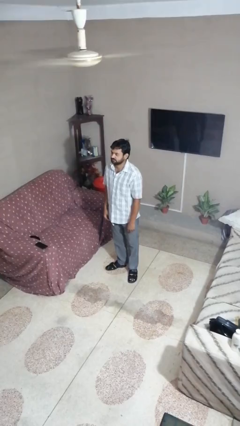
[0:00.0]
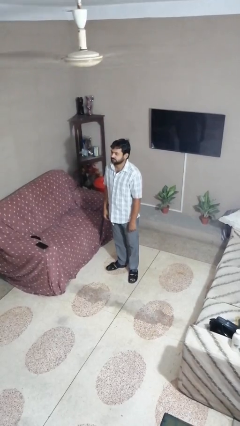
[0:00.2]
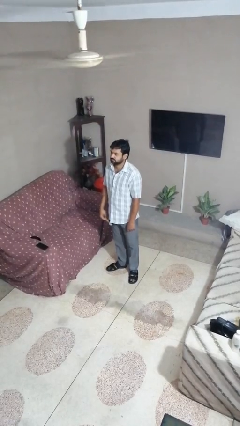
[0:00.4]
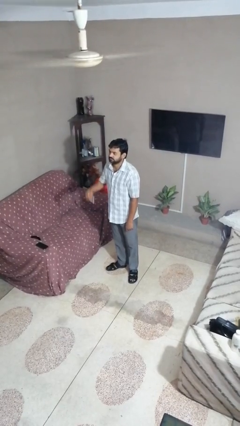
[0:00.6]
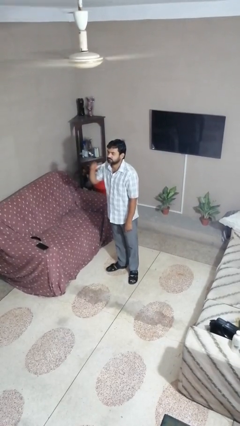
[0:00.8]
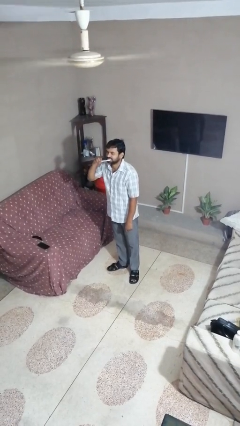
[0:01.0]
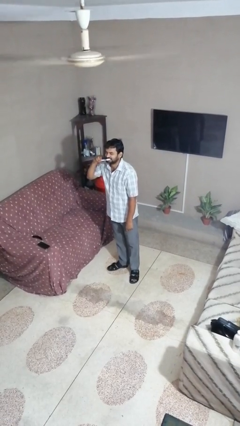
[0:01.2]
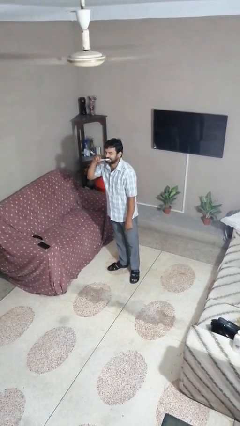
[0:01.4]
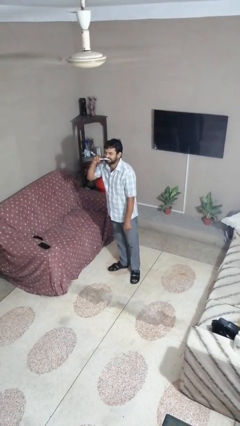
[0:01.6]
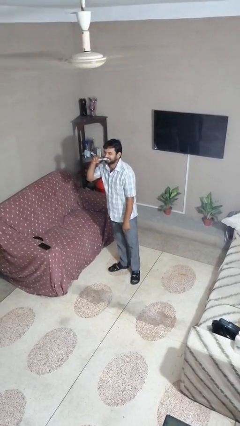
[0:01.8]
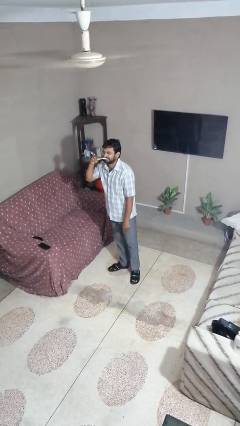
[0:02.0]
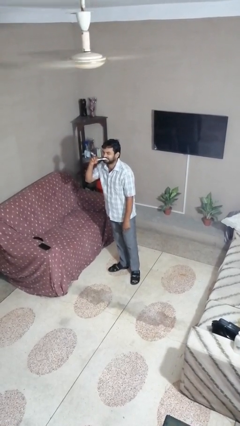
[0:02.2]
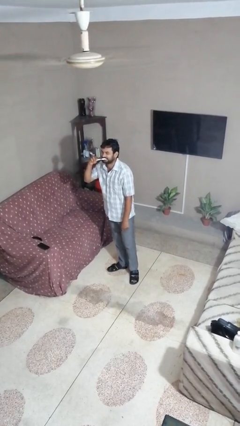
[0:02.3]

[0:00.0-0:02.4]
person brushes teeth

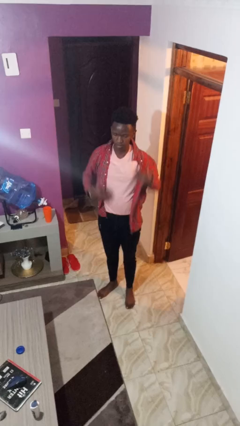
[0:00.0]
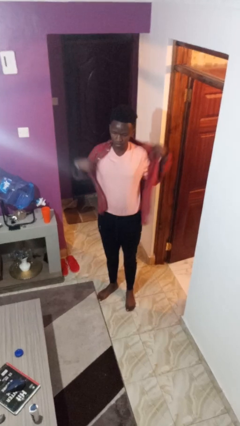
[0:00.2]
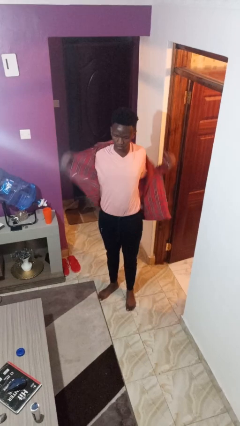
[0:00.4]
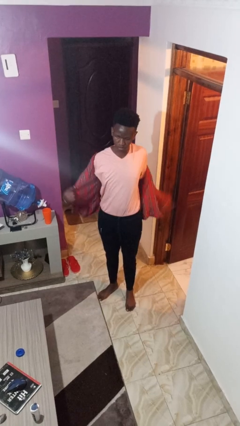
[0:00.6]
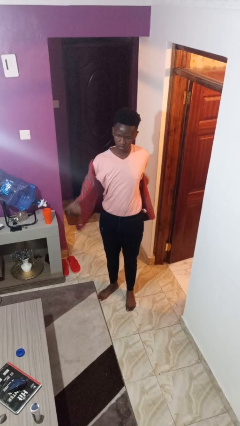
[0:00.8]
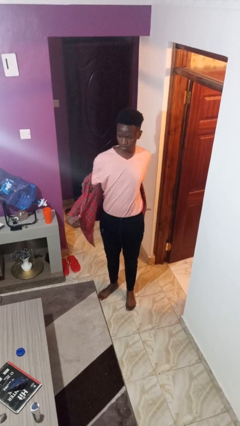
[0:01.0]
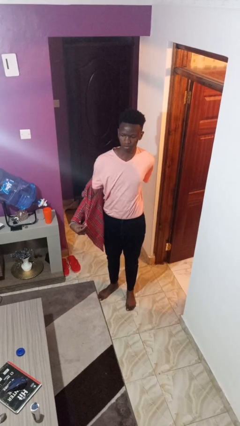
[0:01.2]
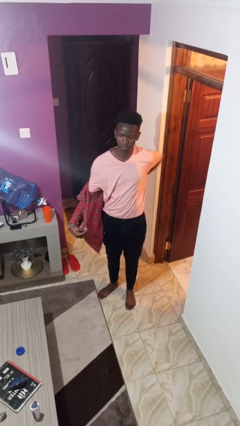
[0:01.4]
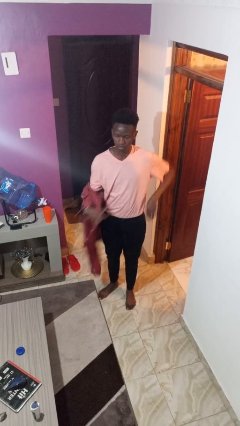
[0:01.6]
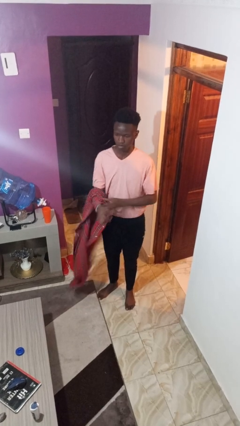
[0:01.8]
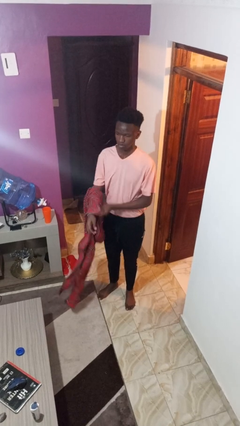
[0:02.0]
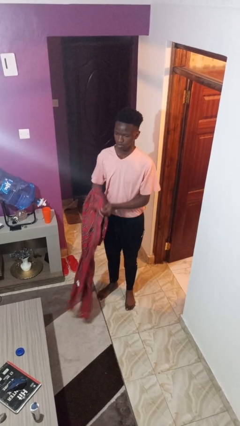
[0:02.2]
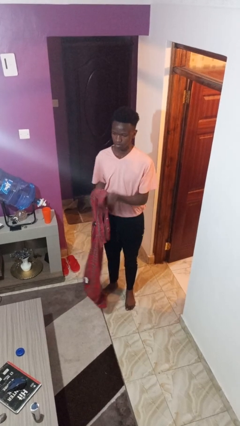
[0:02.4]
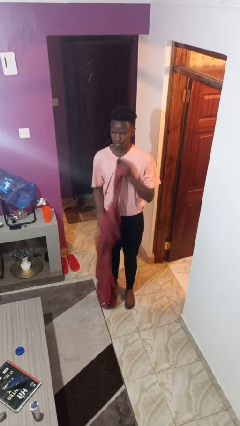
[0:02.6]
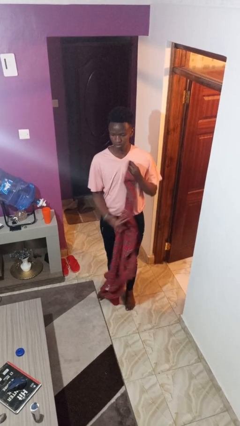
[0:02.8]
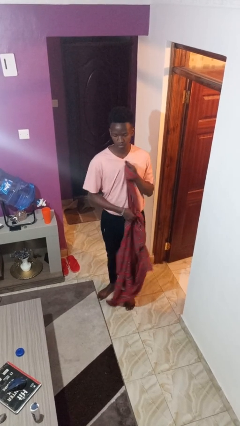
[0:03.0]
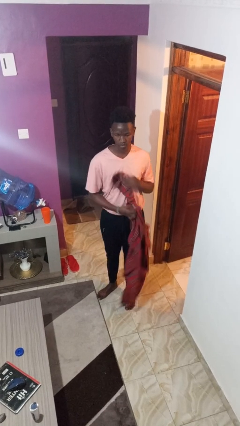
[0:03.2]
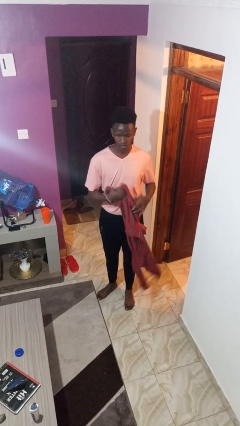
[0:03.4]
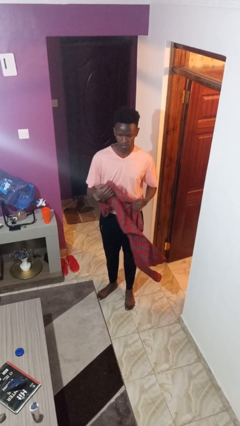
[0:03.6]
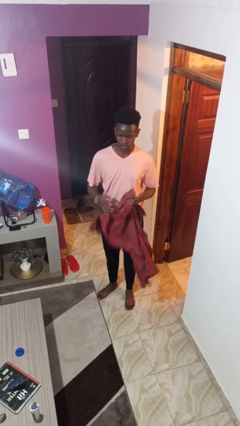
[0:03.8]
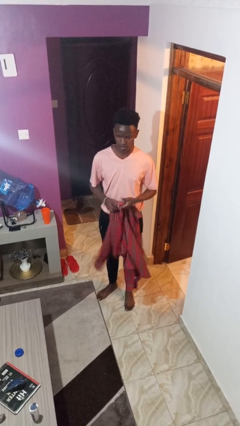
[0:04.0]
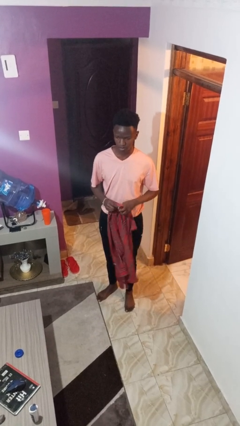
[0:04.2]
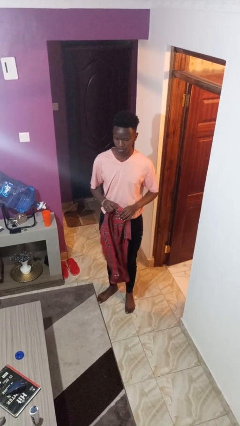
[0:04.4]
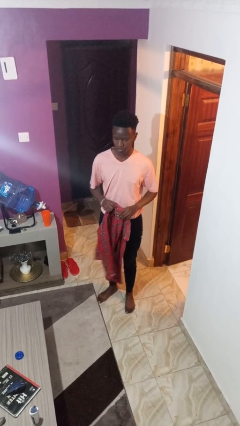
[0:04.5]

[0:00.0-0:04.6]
person takes off shirt

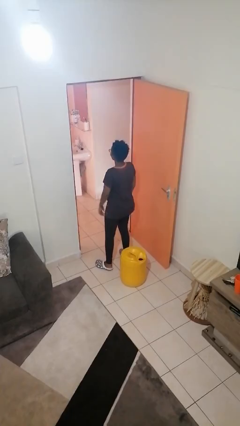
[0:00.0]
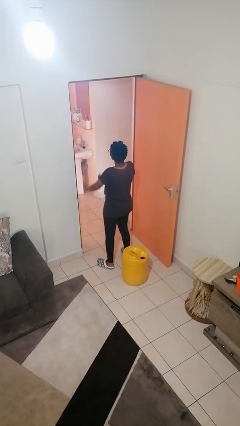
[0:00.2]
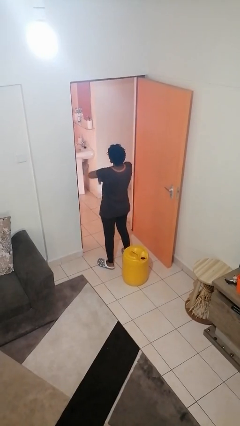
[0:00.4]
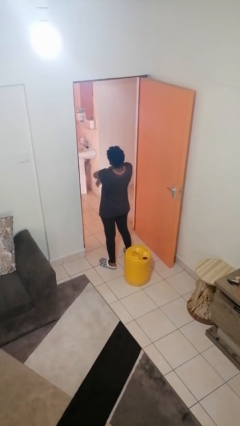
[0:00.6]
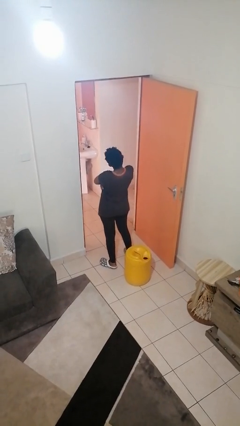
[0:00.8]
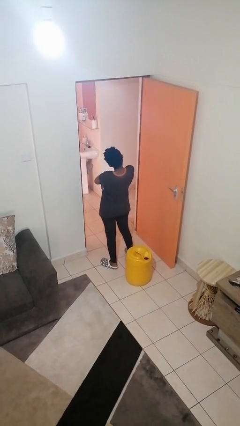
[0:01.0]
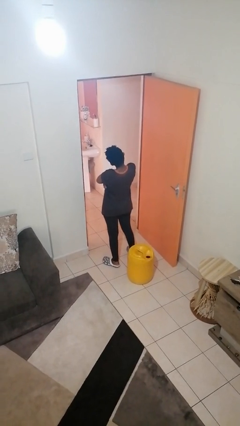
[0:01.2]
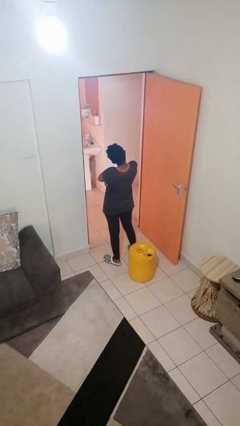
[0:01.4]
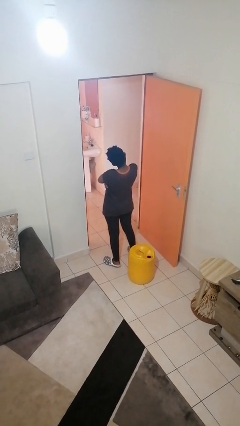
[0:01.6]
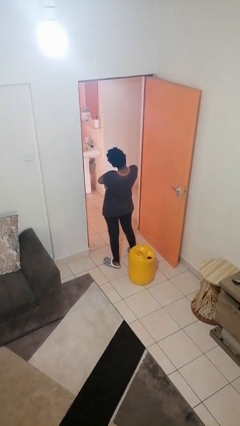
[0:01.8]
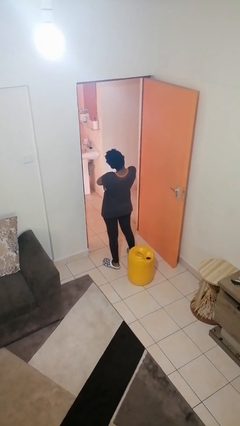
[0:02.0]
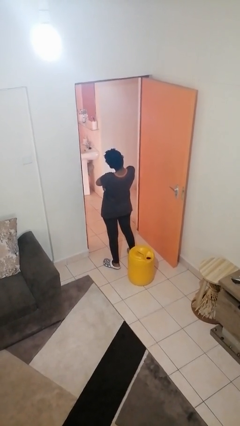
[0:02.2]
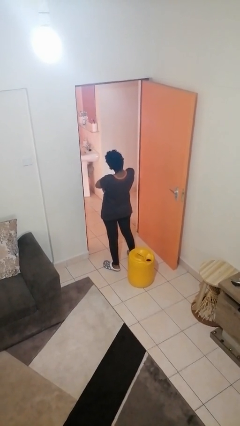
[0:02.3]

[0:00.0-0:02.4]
person crosses arms

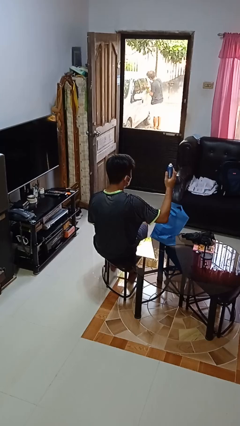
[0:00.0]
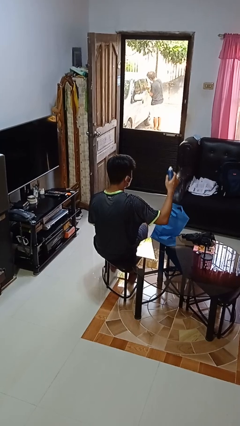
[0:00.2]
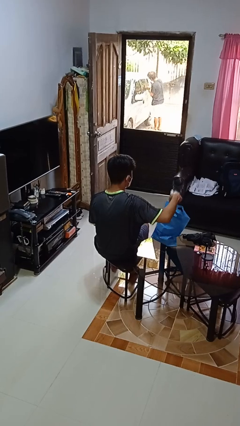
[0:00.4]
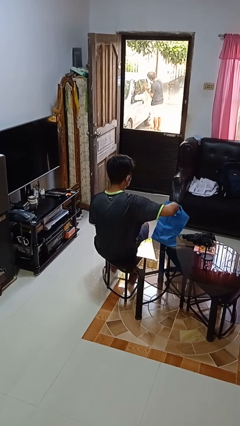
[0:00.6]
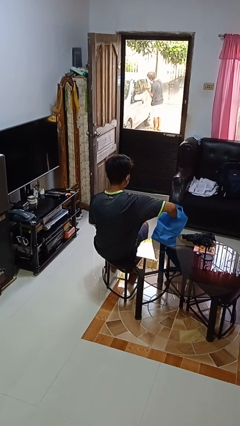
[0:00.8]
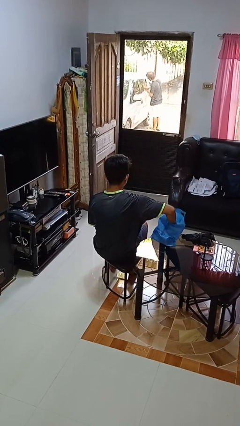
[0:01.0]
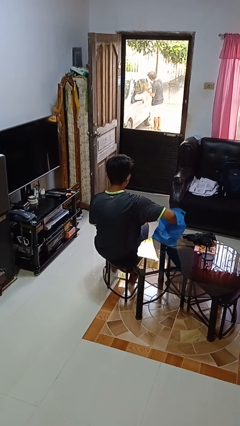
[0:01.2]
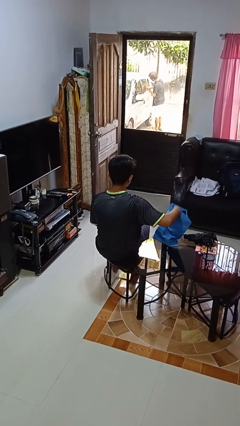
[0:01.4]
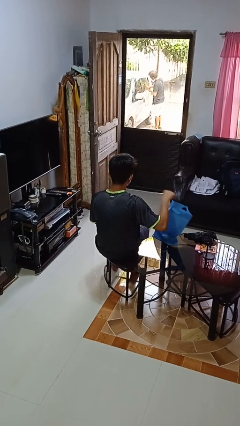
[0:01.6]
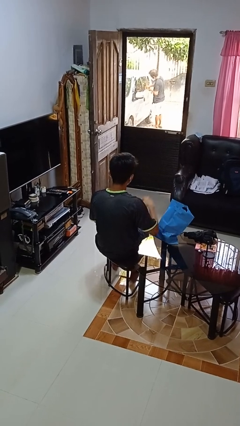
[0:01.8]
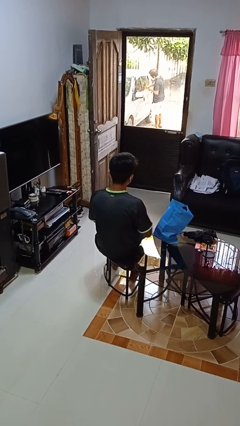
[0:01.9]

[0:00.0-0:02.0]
person puts object into bag

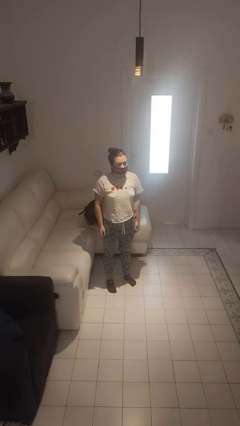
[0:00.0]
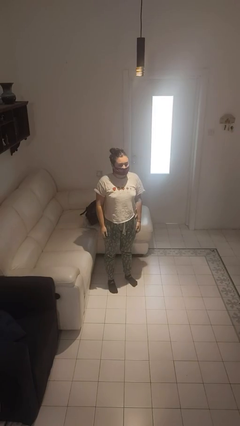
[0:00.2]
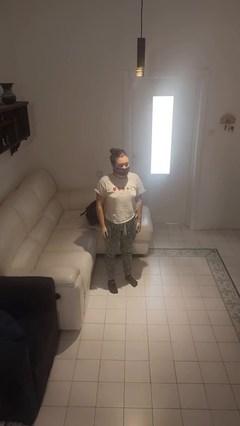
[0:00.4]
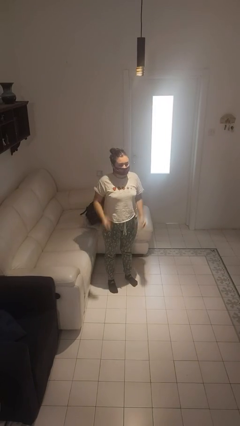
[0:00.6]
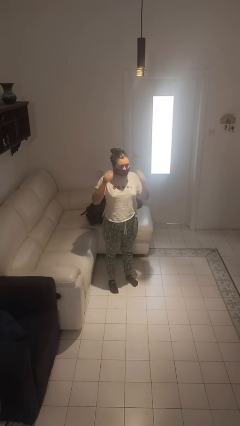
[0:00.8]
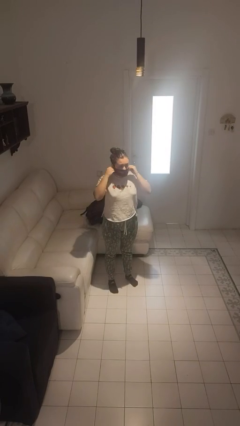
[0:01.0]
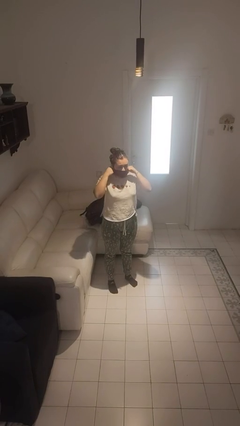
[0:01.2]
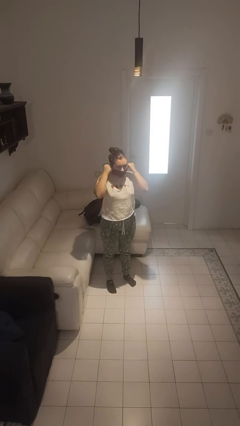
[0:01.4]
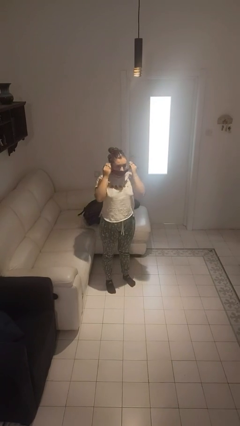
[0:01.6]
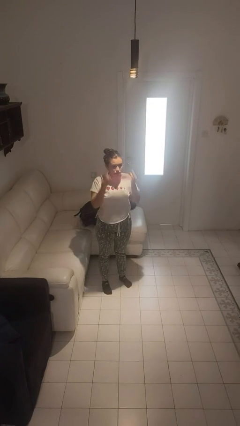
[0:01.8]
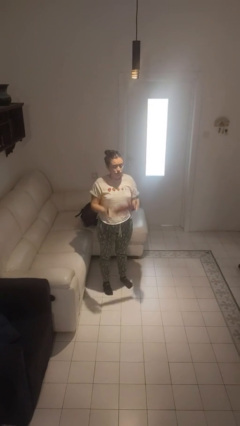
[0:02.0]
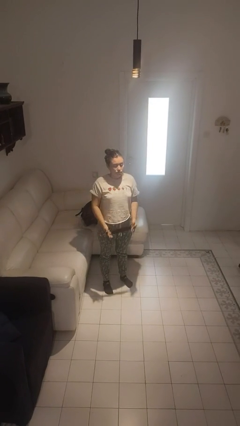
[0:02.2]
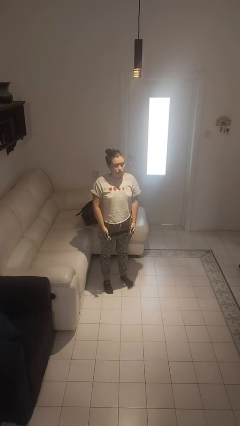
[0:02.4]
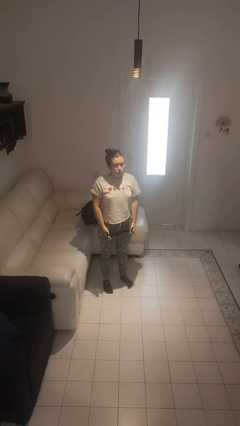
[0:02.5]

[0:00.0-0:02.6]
person takes off facemask

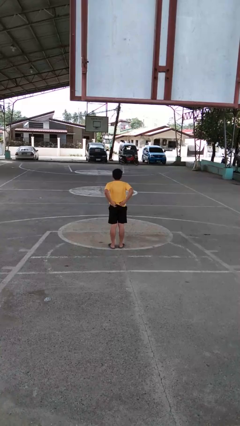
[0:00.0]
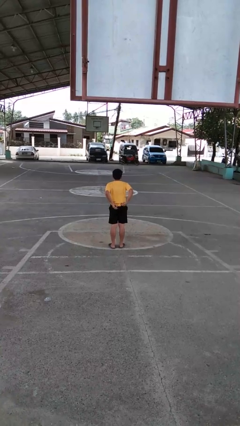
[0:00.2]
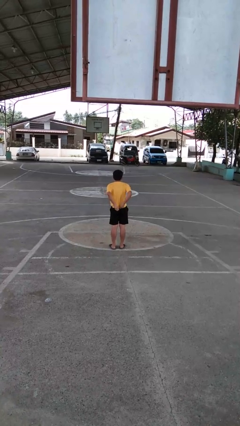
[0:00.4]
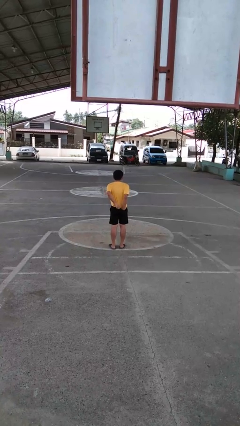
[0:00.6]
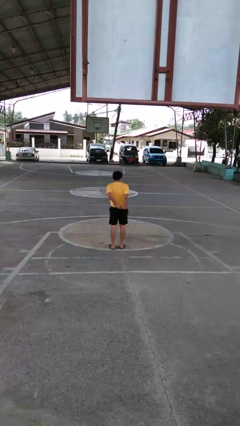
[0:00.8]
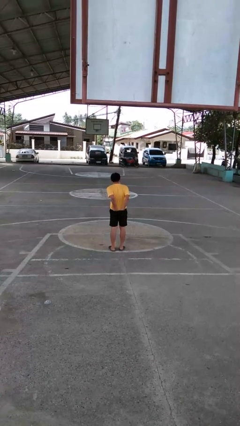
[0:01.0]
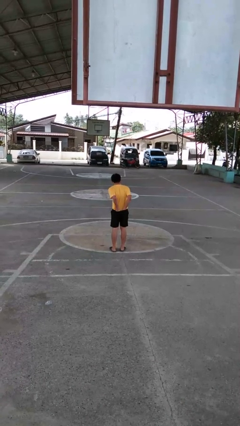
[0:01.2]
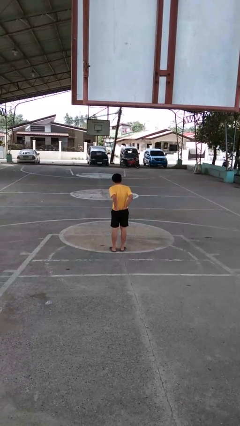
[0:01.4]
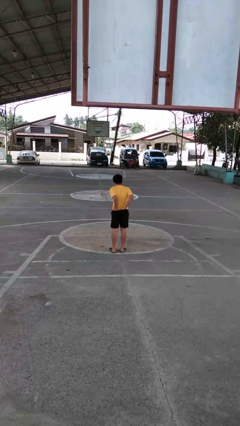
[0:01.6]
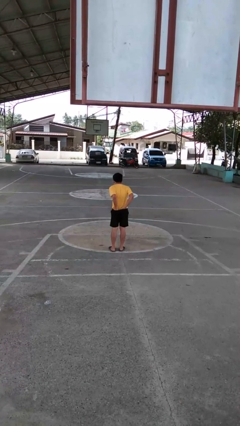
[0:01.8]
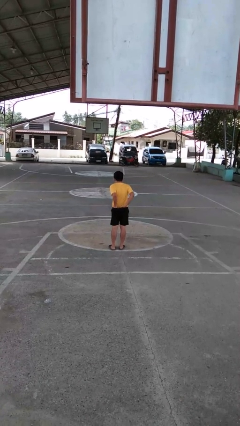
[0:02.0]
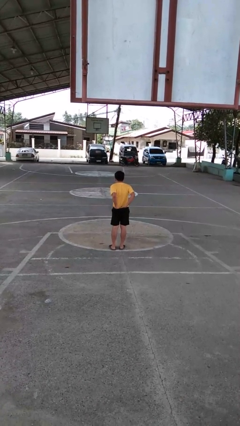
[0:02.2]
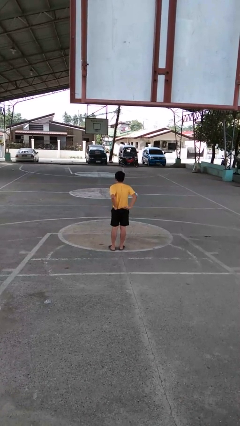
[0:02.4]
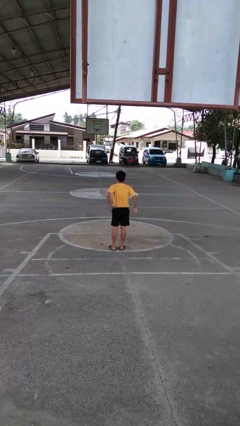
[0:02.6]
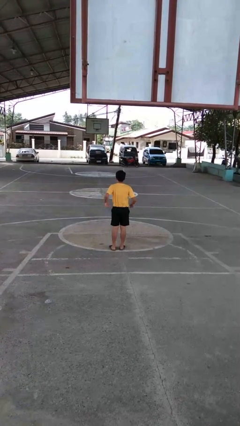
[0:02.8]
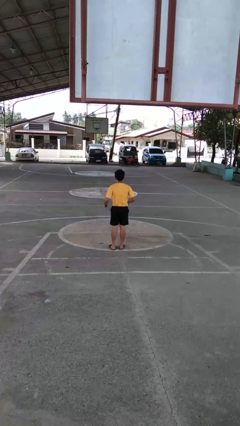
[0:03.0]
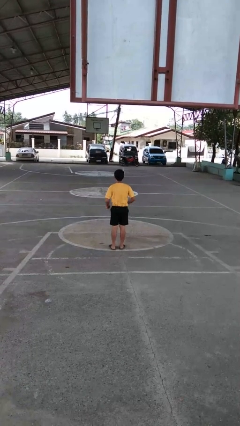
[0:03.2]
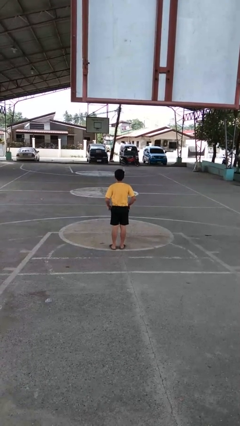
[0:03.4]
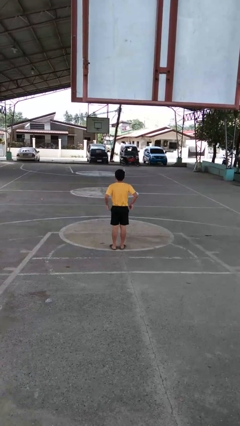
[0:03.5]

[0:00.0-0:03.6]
person tucks in shirt
